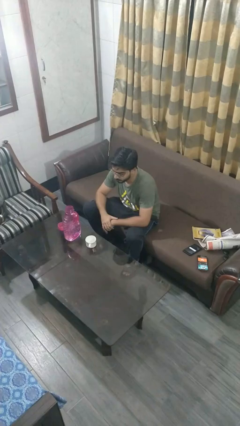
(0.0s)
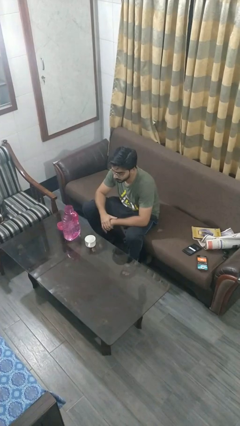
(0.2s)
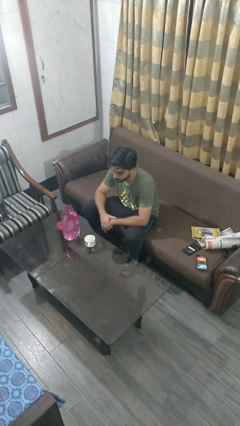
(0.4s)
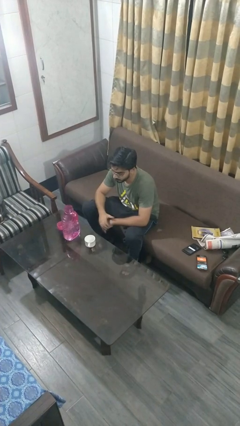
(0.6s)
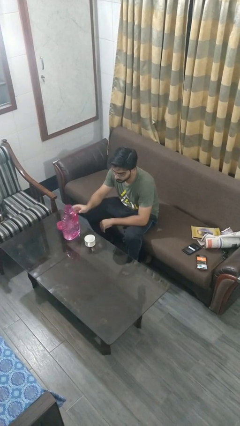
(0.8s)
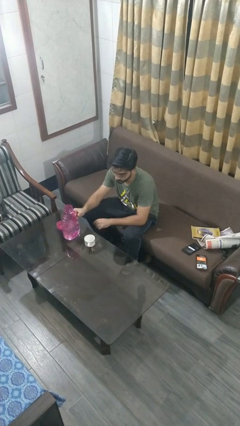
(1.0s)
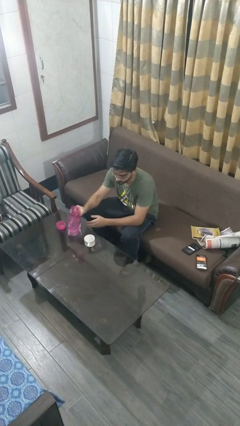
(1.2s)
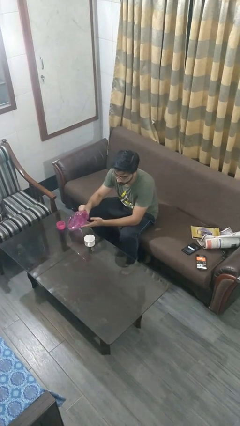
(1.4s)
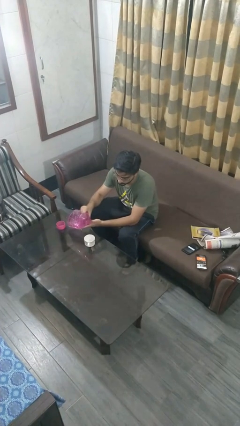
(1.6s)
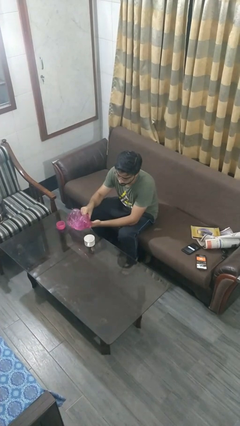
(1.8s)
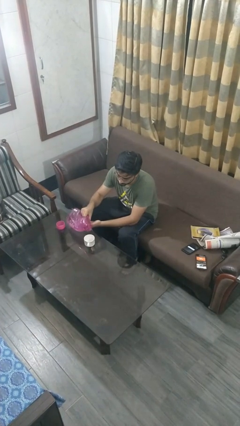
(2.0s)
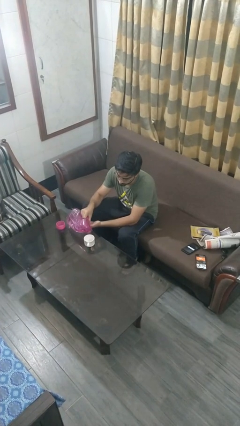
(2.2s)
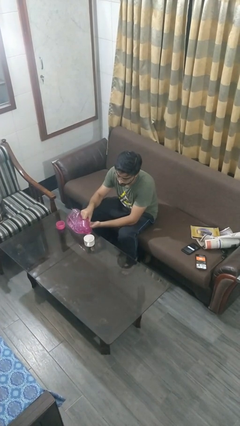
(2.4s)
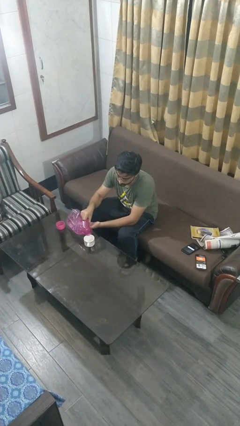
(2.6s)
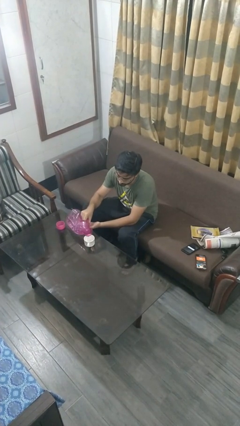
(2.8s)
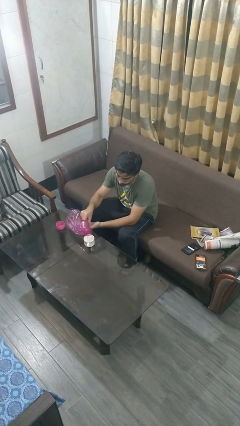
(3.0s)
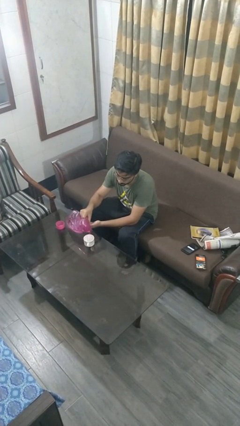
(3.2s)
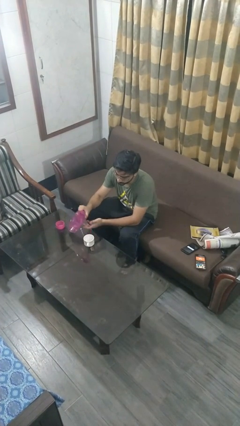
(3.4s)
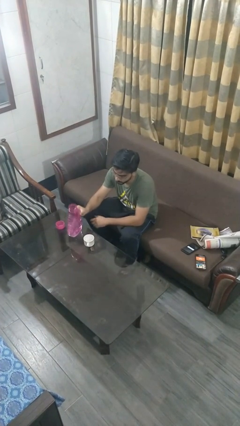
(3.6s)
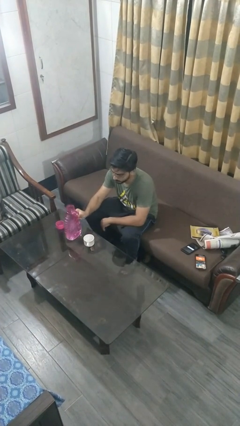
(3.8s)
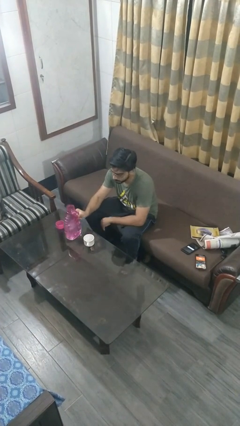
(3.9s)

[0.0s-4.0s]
person pours liquid into cup

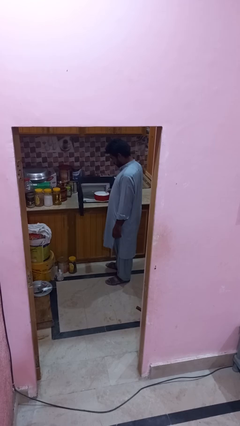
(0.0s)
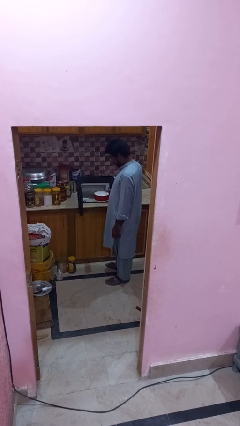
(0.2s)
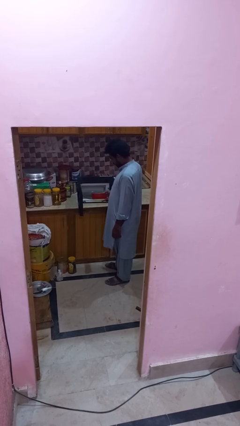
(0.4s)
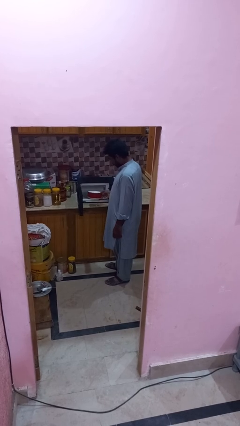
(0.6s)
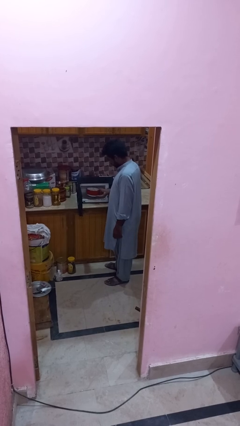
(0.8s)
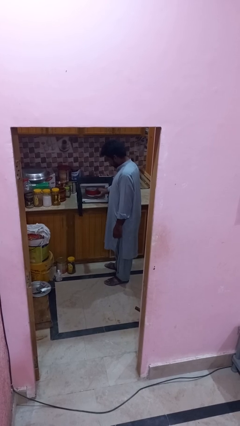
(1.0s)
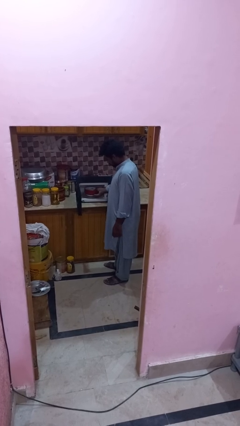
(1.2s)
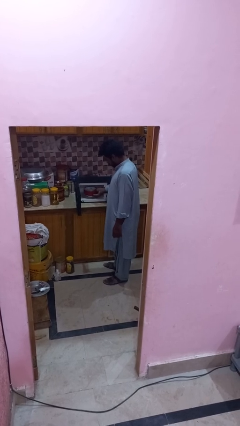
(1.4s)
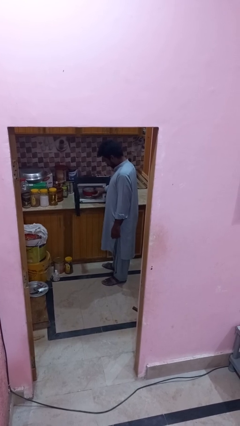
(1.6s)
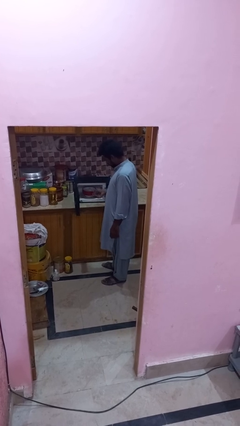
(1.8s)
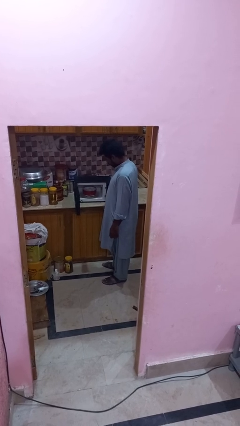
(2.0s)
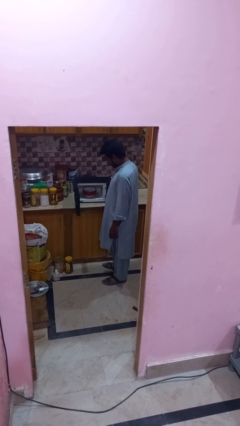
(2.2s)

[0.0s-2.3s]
person puts object into microwave

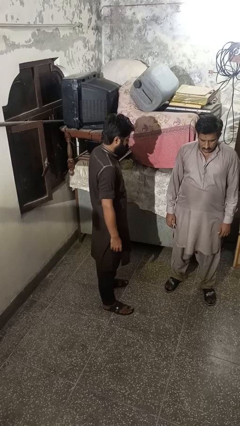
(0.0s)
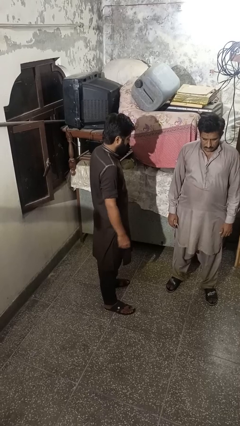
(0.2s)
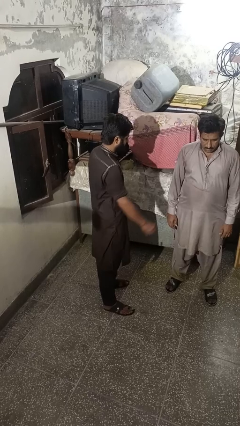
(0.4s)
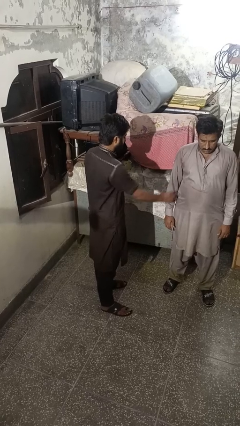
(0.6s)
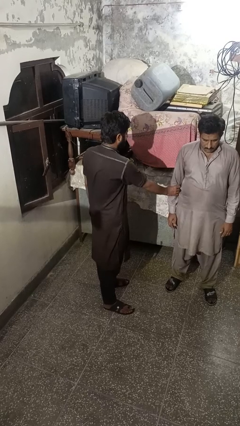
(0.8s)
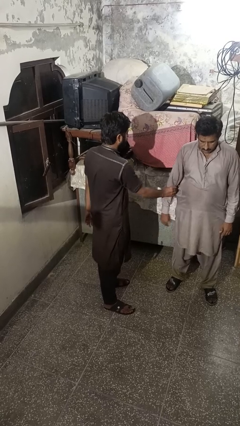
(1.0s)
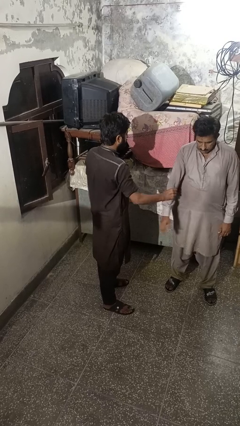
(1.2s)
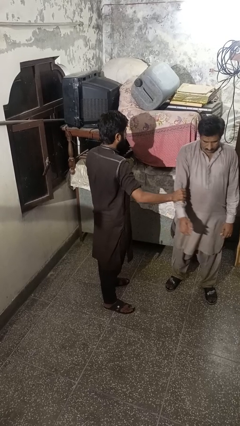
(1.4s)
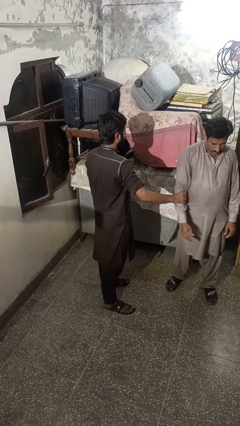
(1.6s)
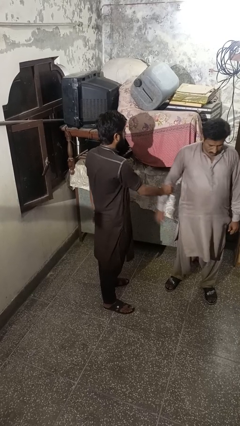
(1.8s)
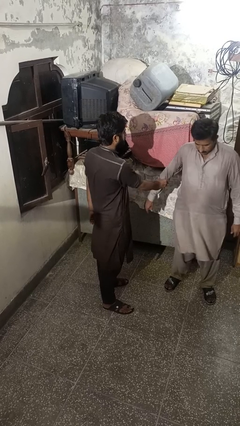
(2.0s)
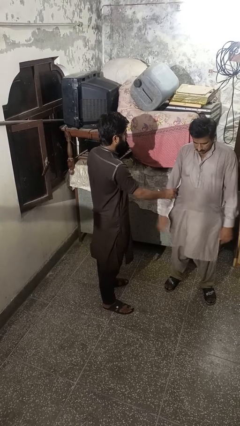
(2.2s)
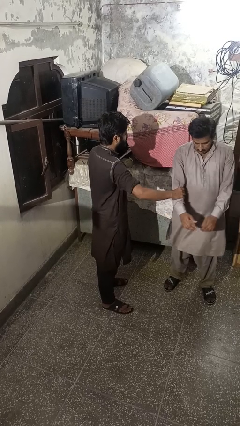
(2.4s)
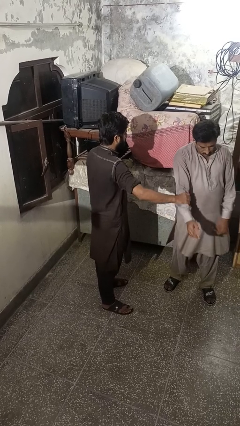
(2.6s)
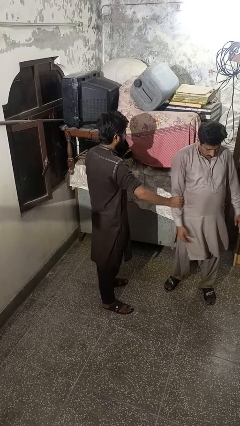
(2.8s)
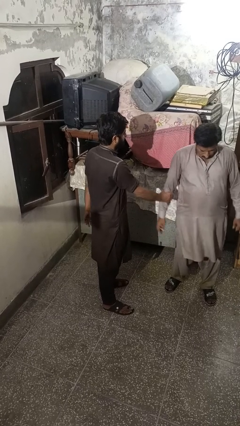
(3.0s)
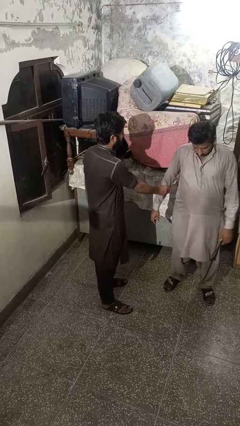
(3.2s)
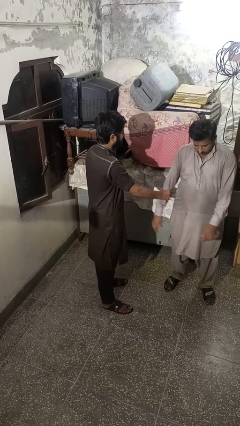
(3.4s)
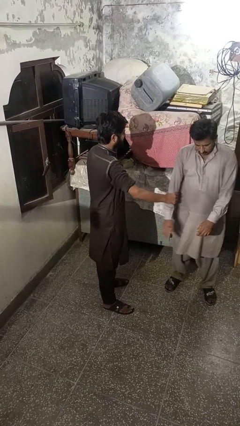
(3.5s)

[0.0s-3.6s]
person grabs person by forearm

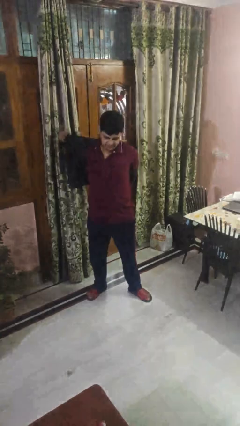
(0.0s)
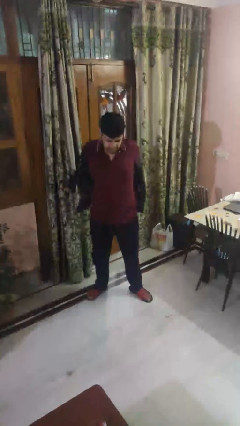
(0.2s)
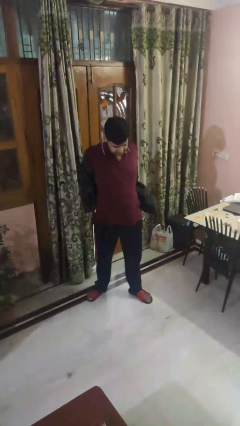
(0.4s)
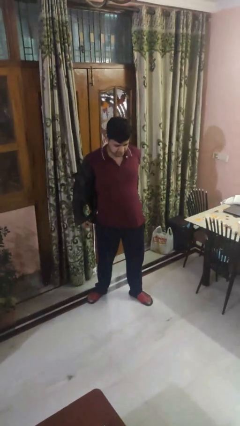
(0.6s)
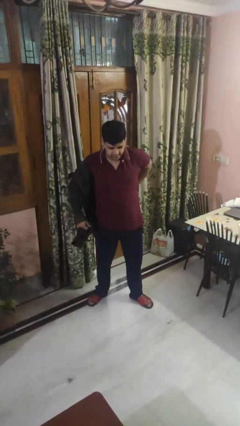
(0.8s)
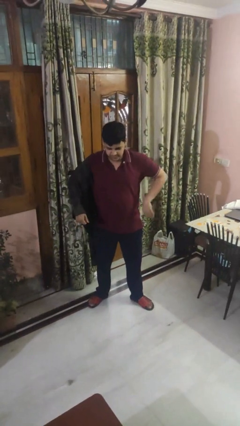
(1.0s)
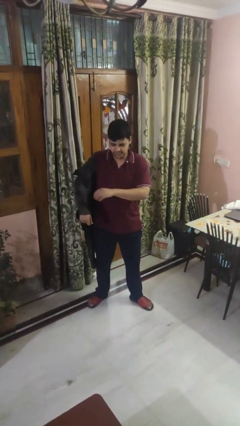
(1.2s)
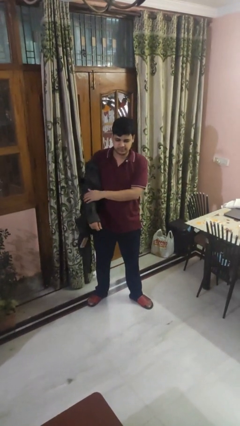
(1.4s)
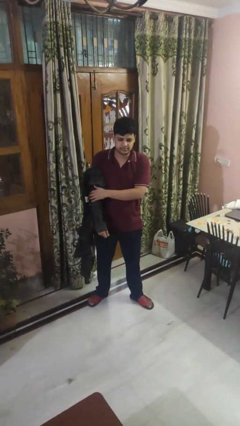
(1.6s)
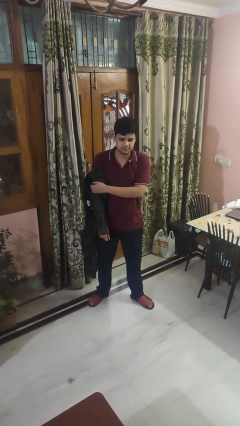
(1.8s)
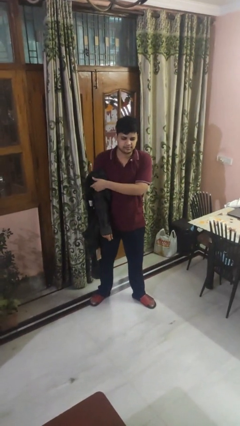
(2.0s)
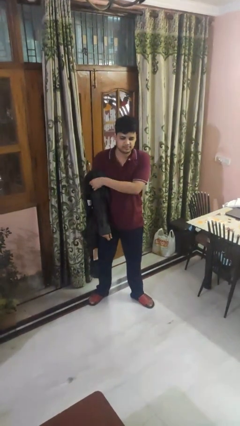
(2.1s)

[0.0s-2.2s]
person takes off shirt

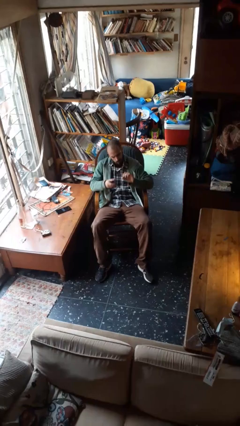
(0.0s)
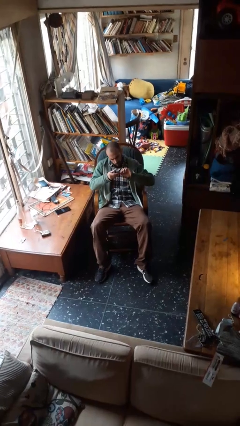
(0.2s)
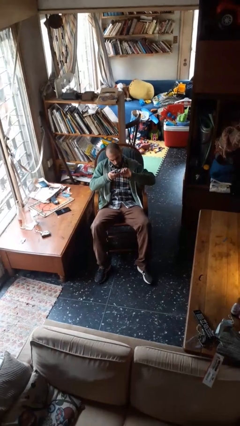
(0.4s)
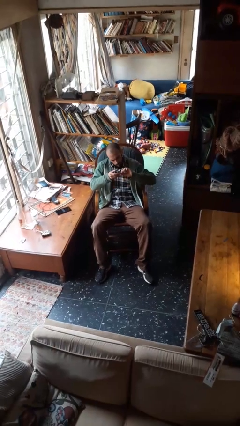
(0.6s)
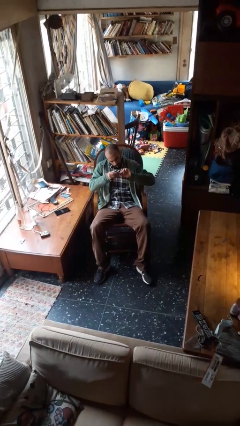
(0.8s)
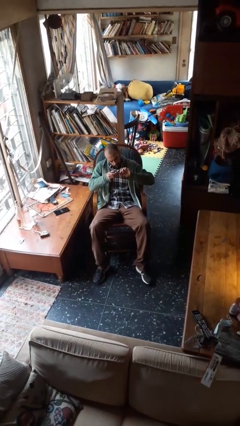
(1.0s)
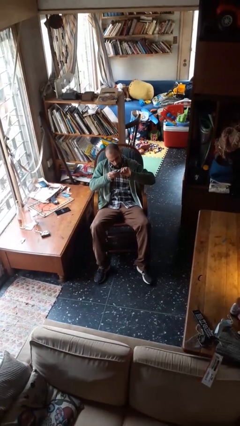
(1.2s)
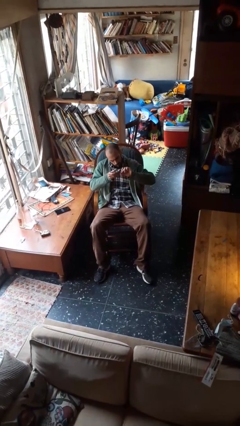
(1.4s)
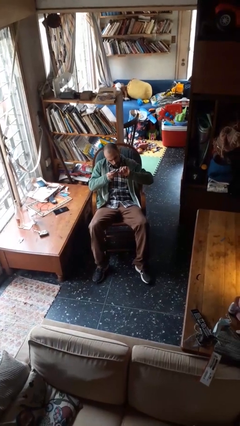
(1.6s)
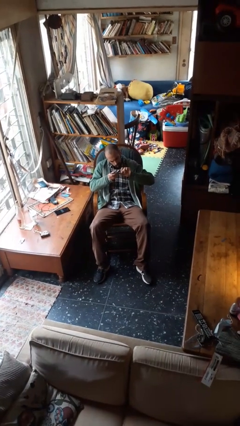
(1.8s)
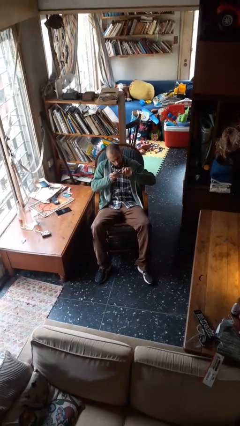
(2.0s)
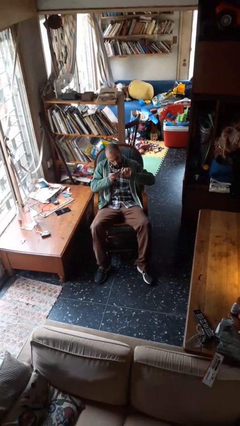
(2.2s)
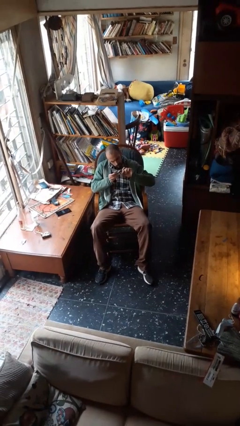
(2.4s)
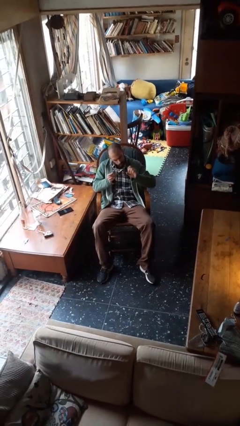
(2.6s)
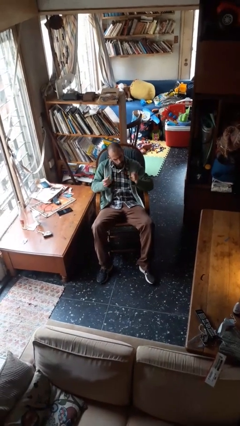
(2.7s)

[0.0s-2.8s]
person clips fingernails

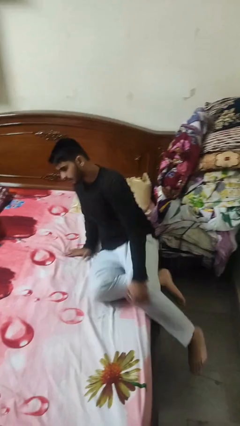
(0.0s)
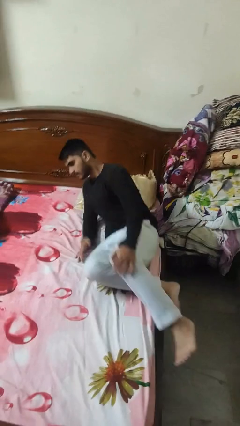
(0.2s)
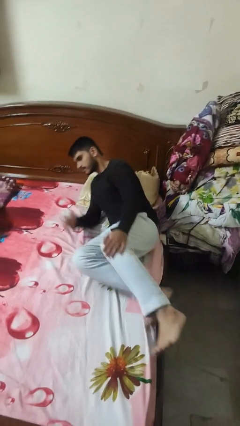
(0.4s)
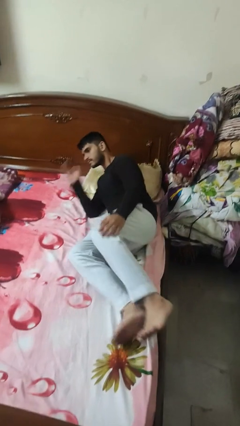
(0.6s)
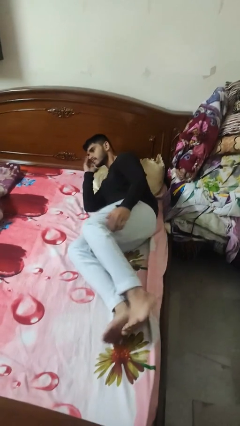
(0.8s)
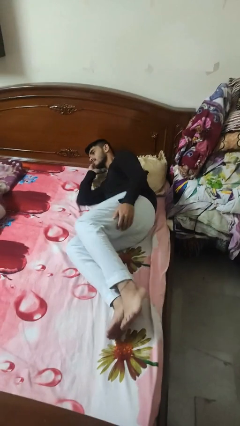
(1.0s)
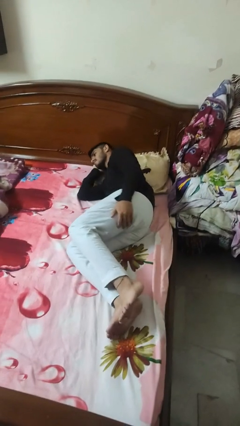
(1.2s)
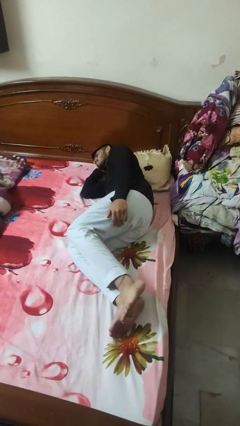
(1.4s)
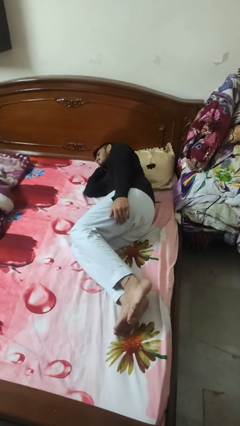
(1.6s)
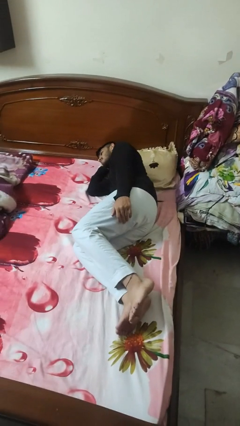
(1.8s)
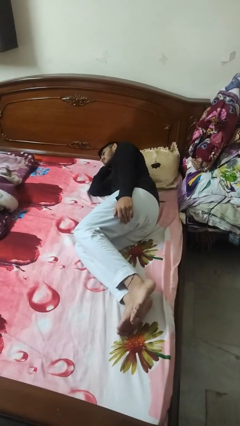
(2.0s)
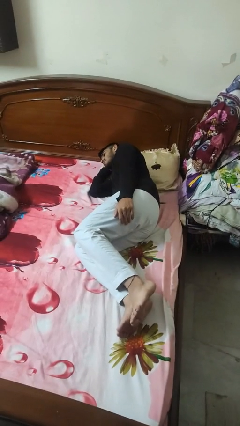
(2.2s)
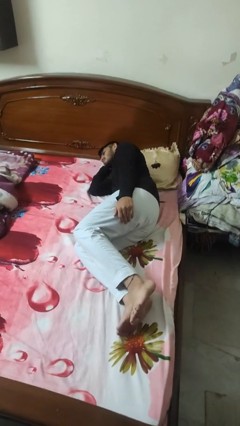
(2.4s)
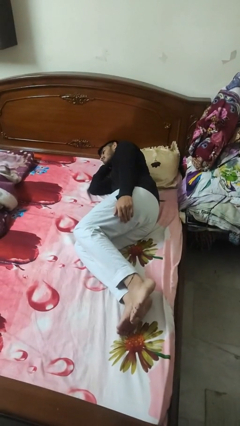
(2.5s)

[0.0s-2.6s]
person lies down on bed

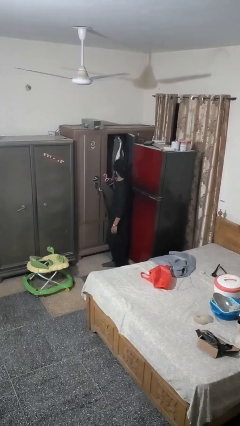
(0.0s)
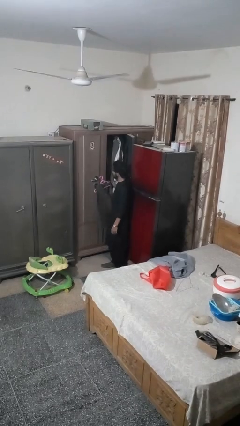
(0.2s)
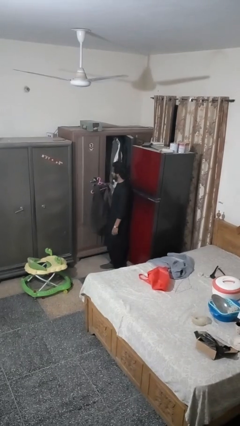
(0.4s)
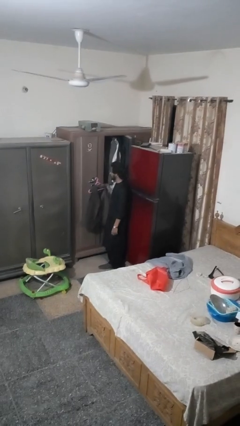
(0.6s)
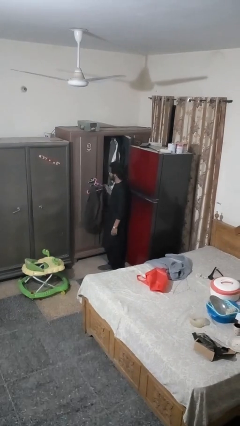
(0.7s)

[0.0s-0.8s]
person takes clothes from closet
